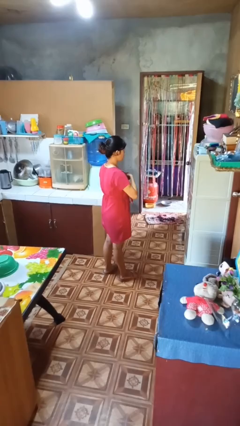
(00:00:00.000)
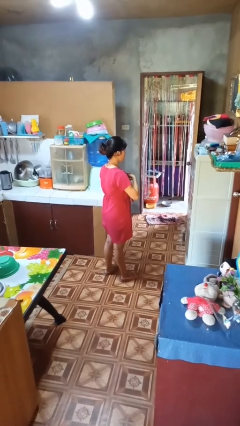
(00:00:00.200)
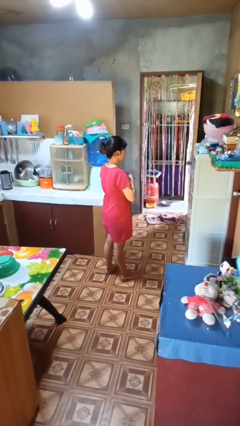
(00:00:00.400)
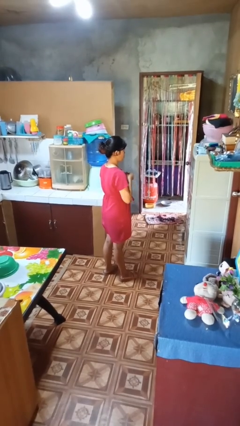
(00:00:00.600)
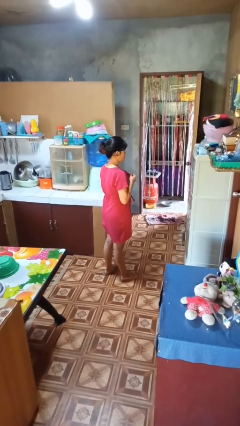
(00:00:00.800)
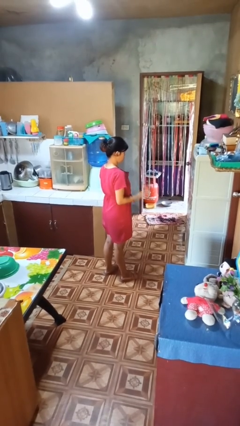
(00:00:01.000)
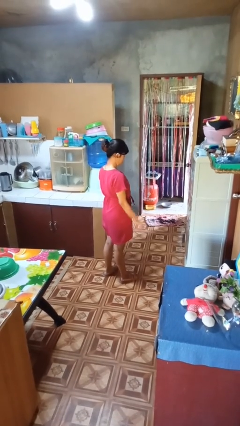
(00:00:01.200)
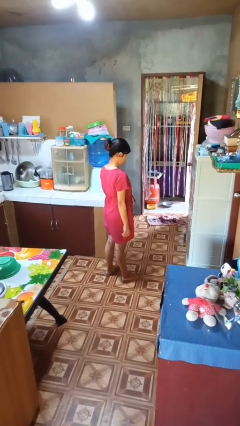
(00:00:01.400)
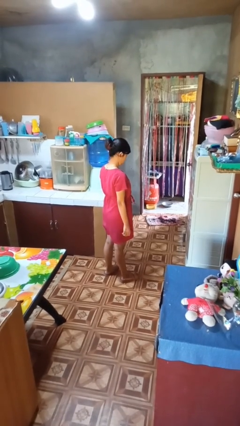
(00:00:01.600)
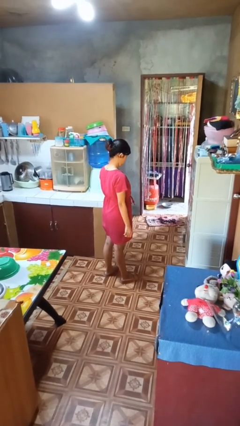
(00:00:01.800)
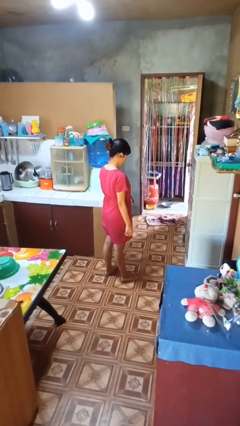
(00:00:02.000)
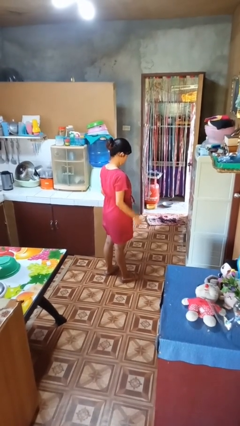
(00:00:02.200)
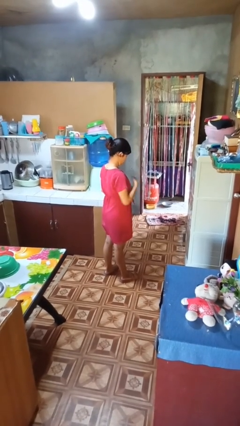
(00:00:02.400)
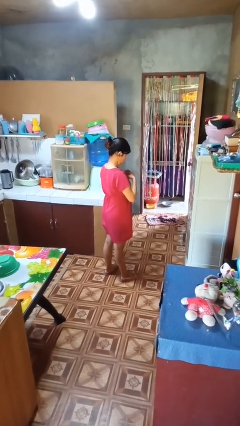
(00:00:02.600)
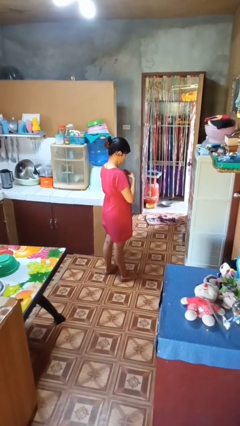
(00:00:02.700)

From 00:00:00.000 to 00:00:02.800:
person unbuttons shirt

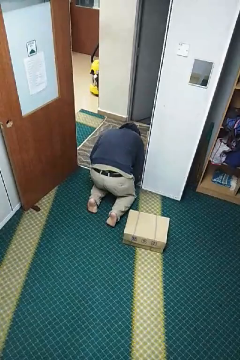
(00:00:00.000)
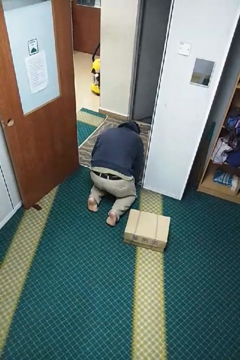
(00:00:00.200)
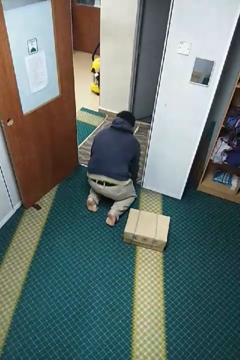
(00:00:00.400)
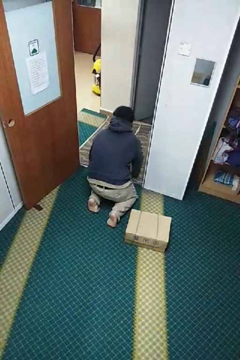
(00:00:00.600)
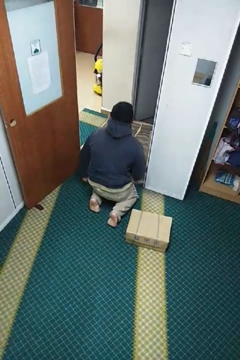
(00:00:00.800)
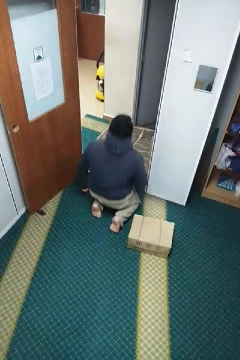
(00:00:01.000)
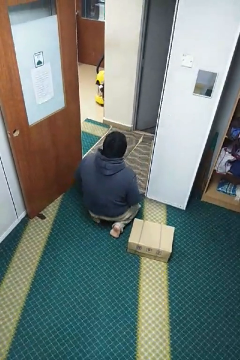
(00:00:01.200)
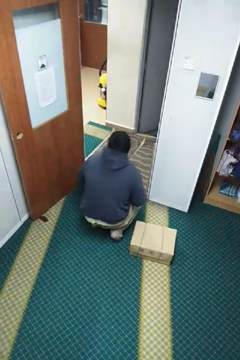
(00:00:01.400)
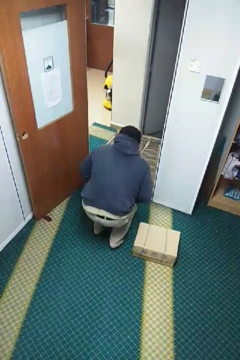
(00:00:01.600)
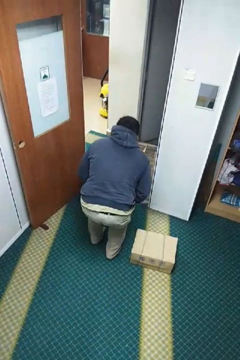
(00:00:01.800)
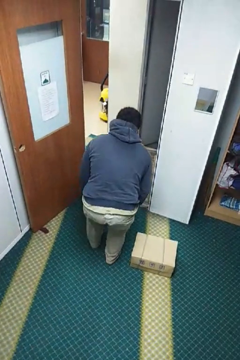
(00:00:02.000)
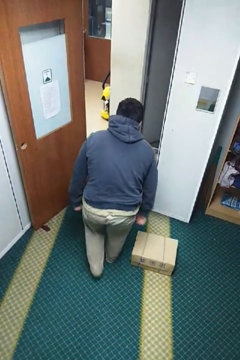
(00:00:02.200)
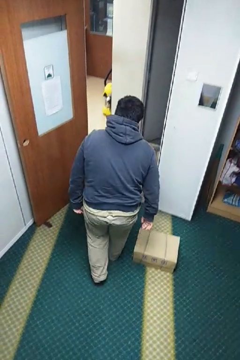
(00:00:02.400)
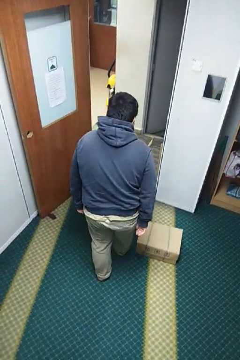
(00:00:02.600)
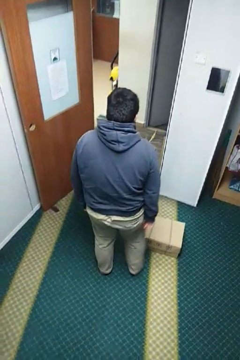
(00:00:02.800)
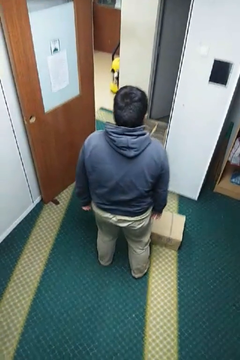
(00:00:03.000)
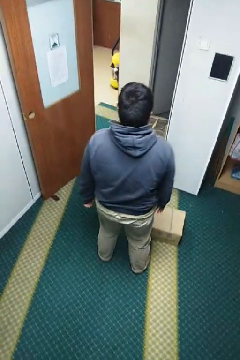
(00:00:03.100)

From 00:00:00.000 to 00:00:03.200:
person stands up from floor

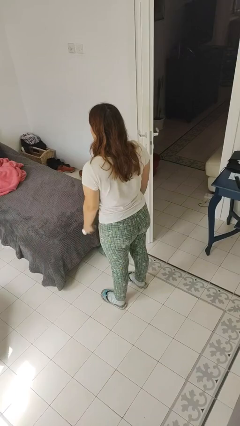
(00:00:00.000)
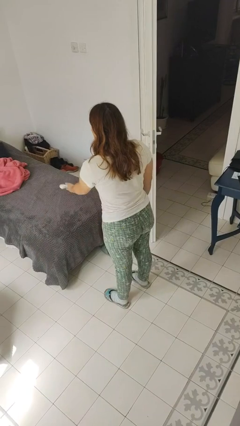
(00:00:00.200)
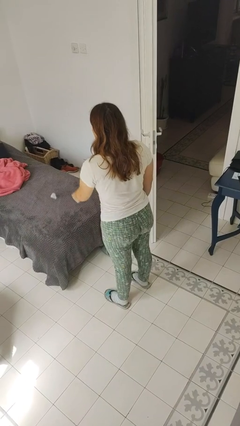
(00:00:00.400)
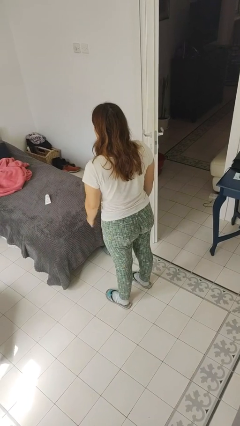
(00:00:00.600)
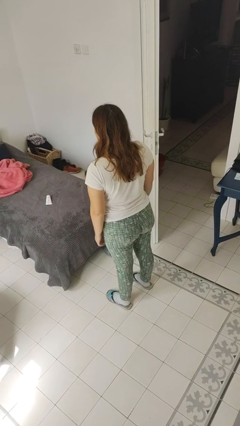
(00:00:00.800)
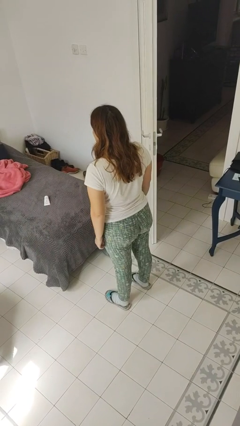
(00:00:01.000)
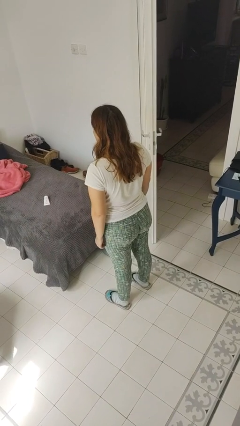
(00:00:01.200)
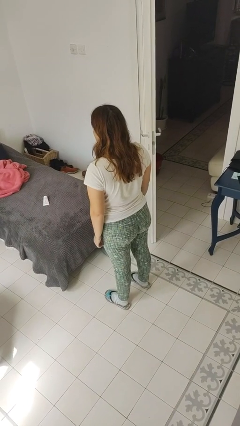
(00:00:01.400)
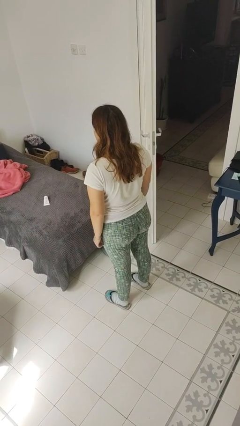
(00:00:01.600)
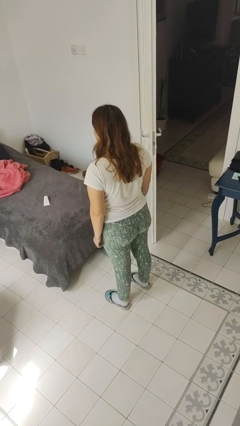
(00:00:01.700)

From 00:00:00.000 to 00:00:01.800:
person throws object on bed

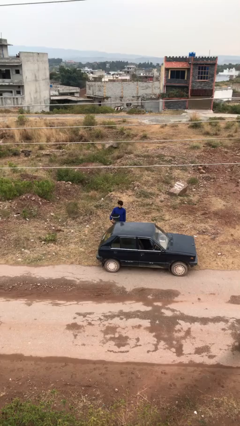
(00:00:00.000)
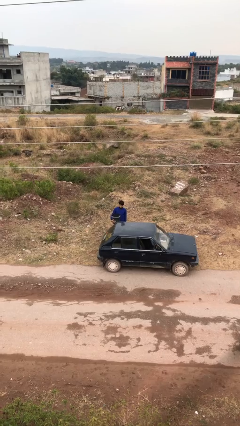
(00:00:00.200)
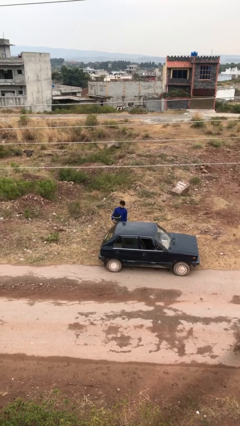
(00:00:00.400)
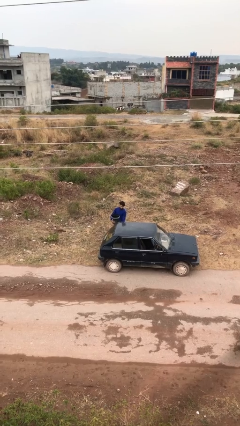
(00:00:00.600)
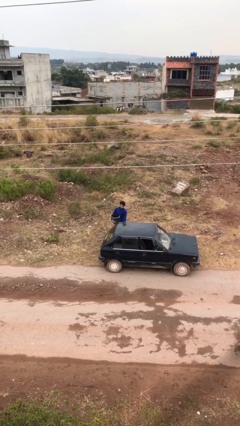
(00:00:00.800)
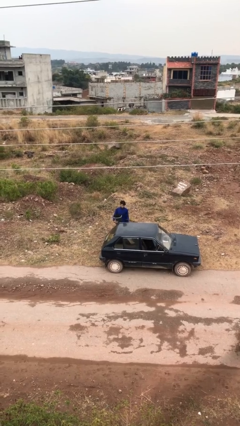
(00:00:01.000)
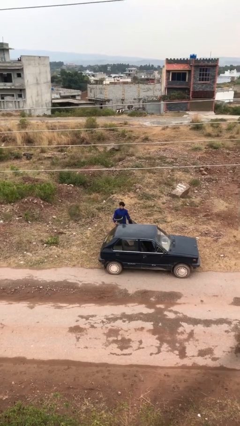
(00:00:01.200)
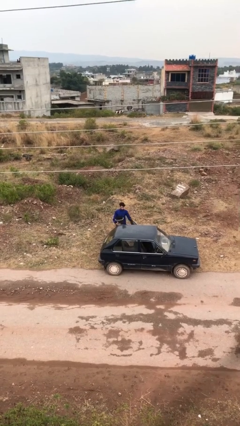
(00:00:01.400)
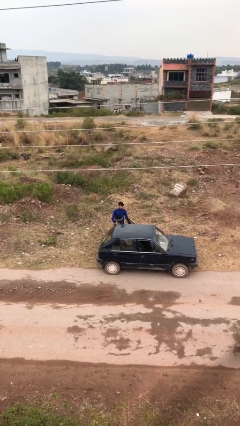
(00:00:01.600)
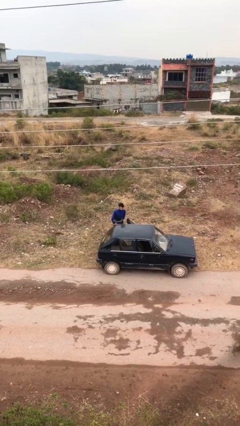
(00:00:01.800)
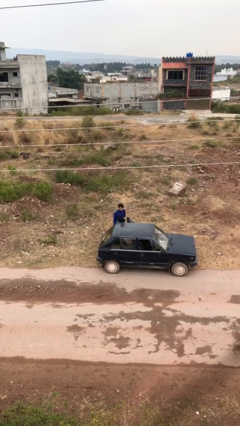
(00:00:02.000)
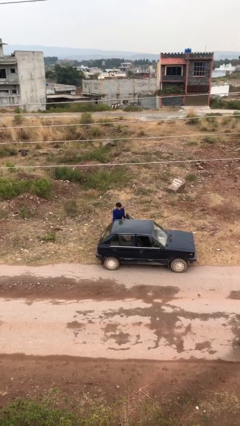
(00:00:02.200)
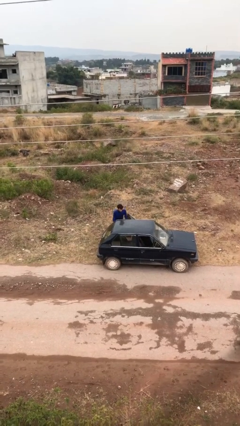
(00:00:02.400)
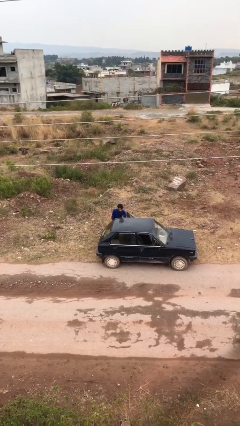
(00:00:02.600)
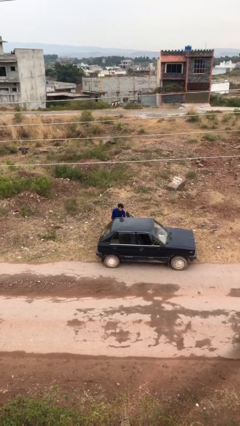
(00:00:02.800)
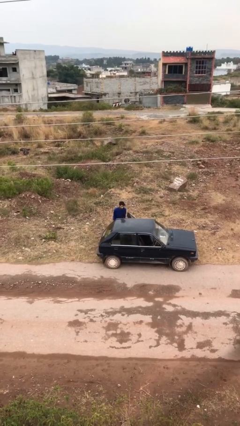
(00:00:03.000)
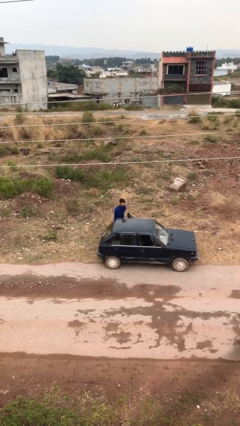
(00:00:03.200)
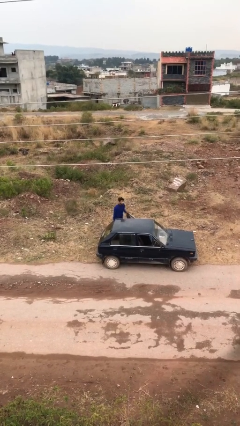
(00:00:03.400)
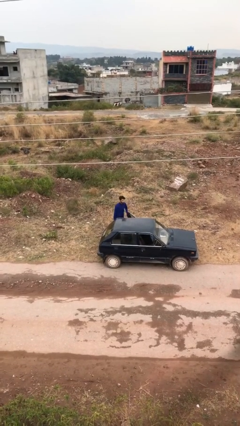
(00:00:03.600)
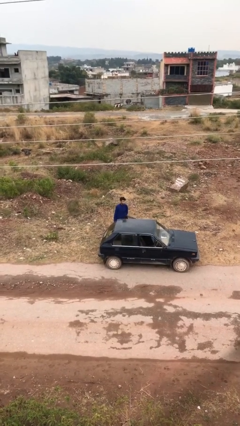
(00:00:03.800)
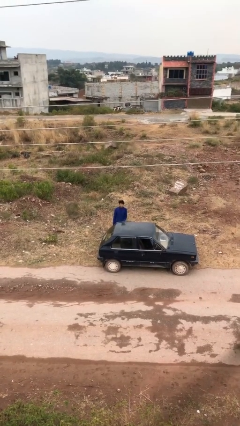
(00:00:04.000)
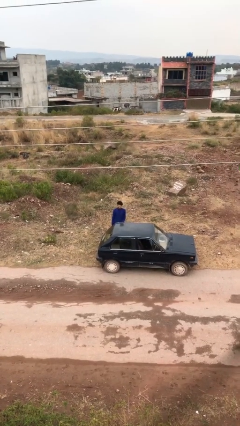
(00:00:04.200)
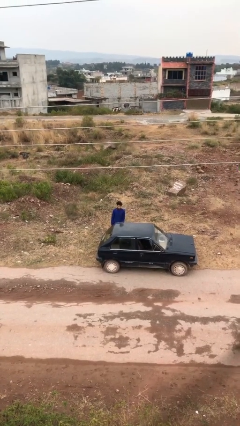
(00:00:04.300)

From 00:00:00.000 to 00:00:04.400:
person loads car

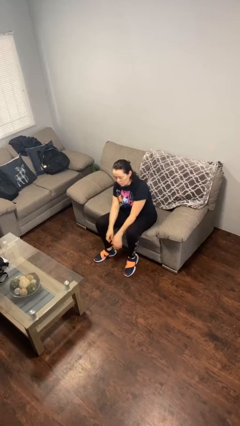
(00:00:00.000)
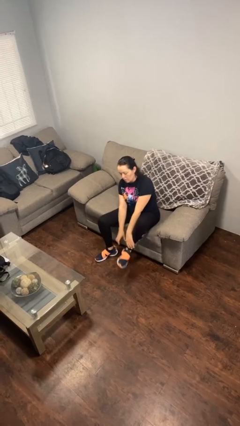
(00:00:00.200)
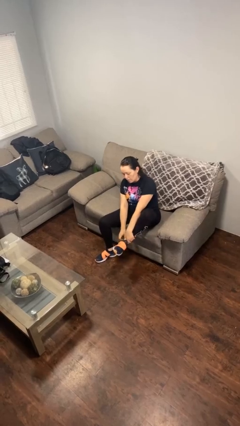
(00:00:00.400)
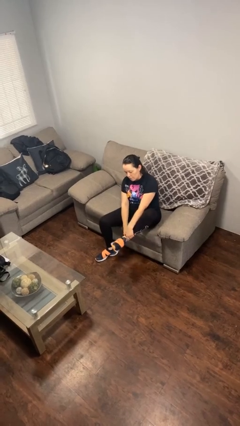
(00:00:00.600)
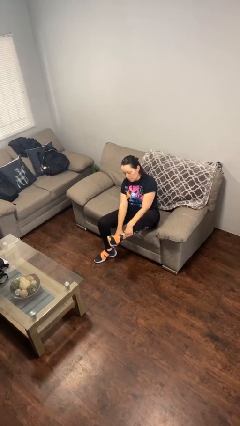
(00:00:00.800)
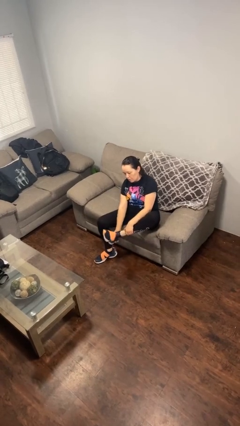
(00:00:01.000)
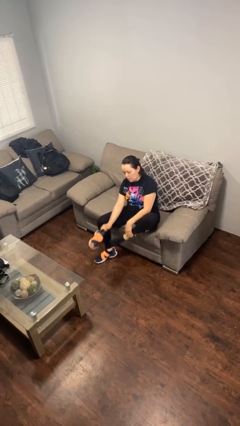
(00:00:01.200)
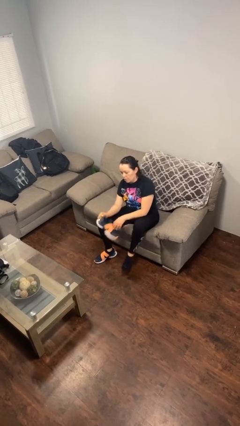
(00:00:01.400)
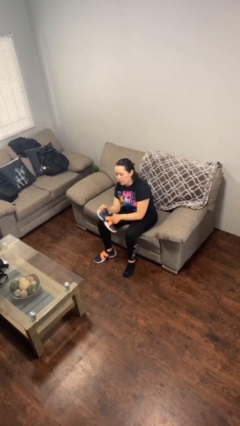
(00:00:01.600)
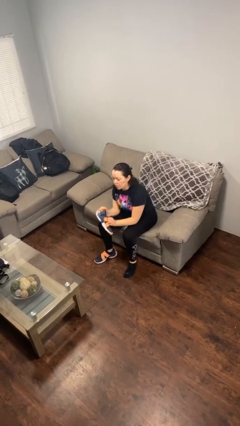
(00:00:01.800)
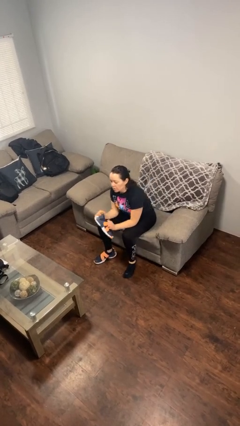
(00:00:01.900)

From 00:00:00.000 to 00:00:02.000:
person takes off shoes

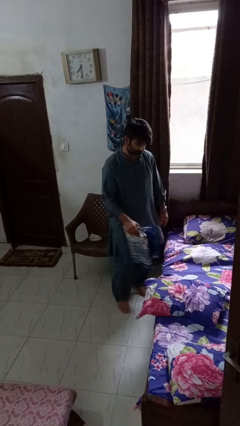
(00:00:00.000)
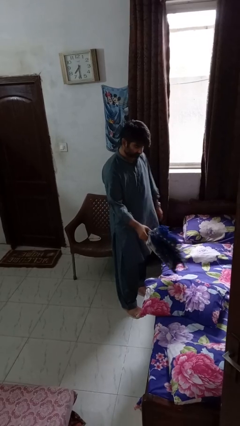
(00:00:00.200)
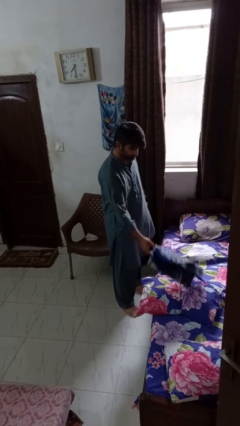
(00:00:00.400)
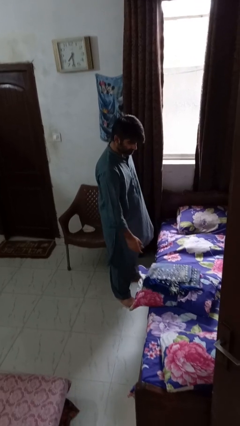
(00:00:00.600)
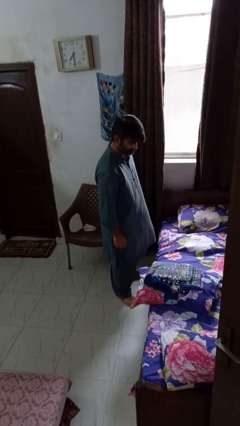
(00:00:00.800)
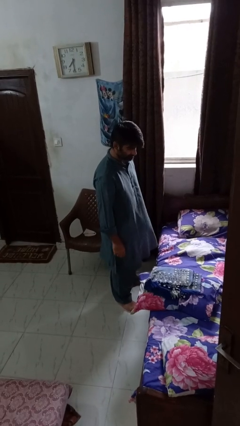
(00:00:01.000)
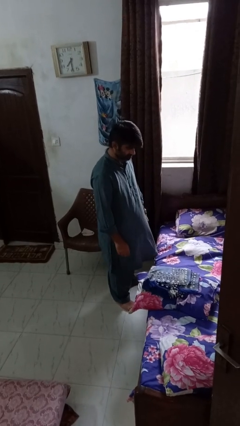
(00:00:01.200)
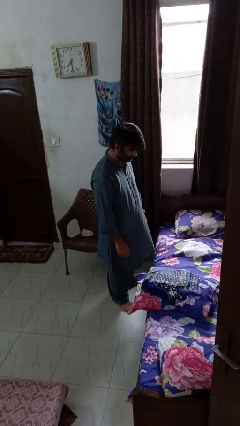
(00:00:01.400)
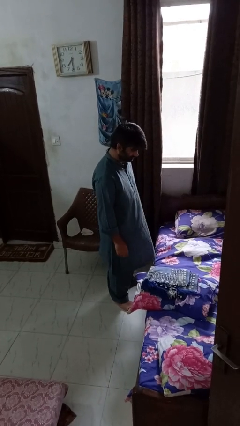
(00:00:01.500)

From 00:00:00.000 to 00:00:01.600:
person puts down object on bed

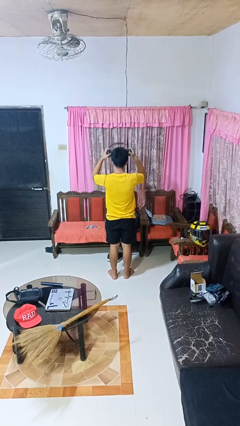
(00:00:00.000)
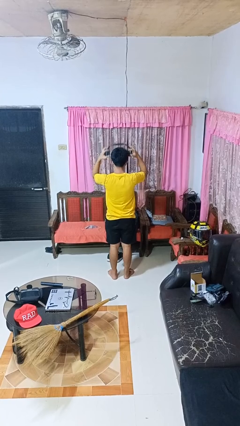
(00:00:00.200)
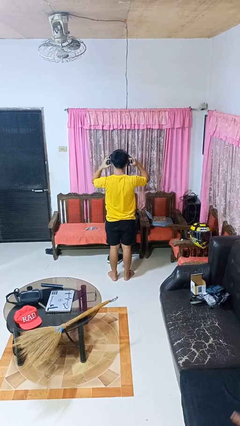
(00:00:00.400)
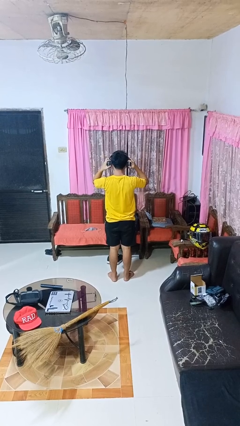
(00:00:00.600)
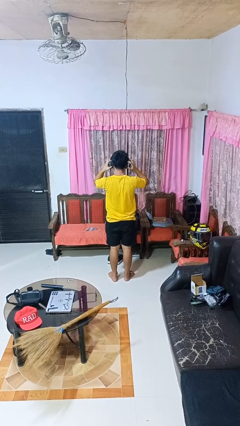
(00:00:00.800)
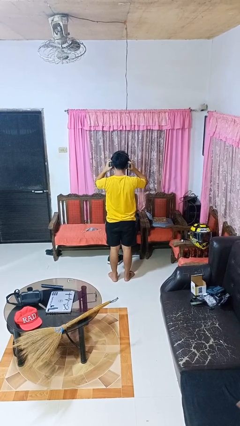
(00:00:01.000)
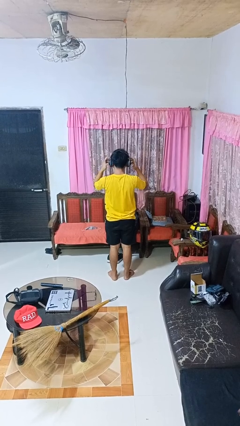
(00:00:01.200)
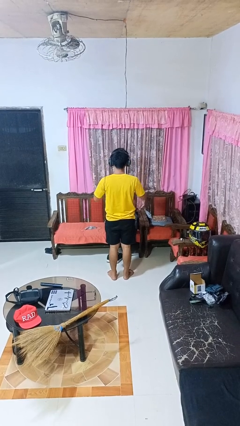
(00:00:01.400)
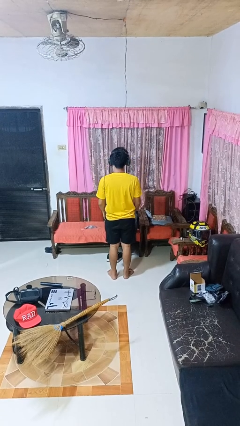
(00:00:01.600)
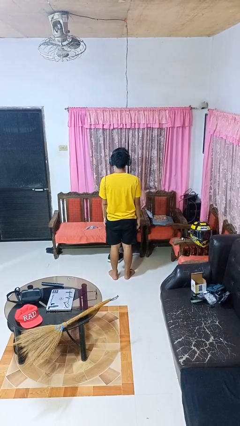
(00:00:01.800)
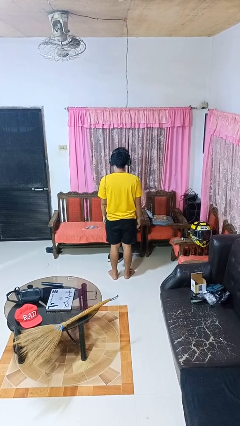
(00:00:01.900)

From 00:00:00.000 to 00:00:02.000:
person puts on headphones
